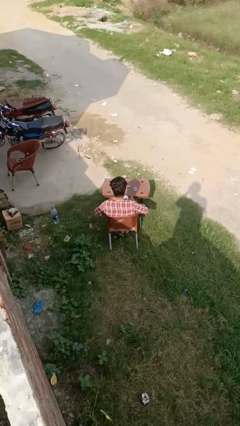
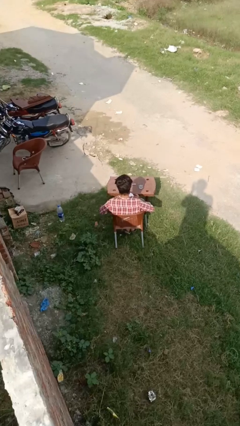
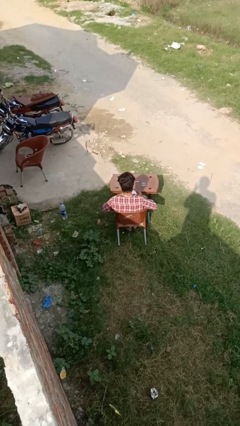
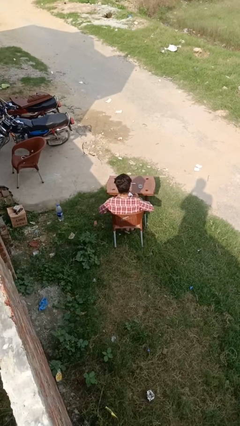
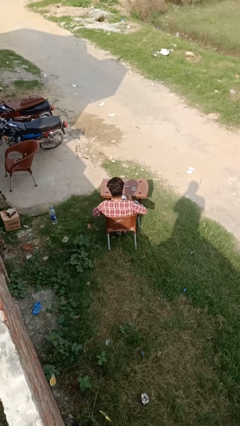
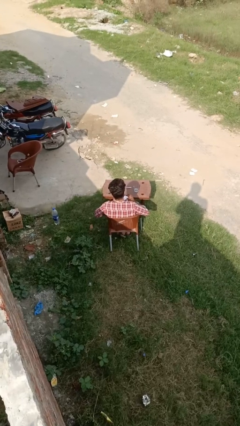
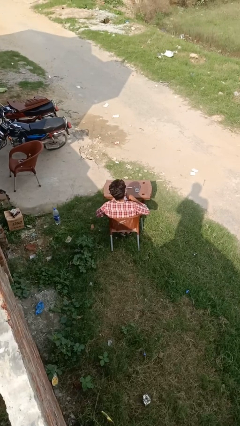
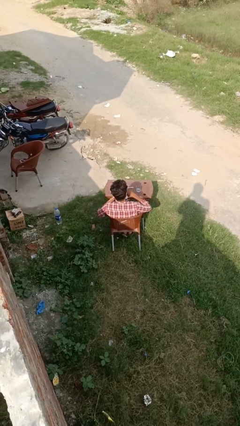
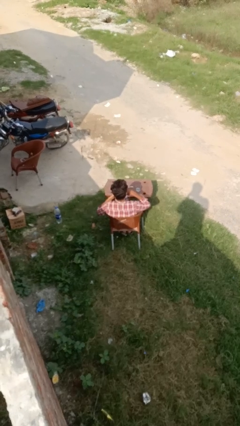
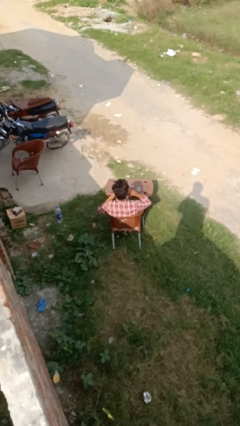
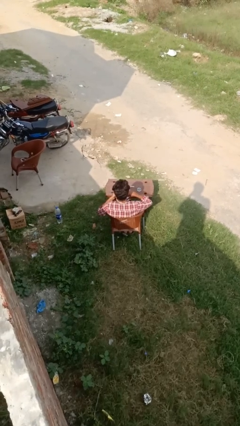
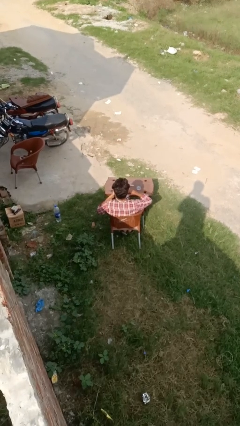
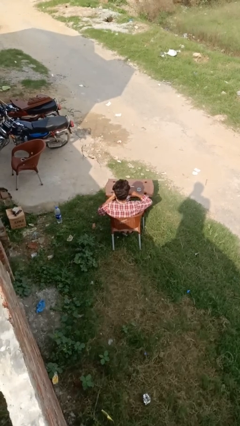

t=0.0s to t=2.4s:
person eats with hands

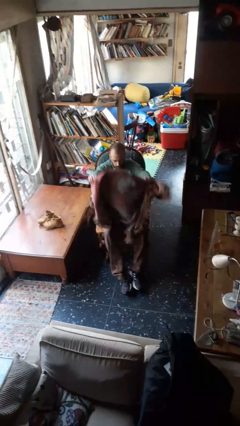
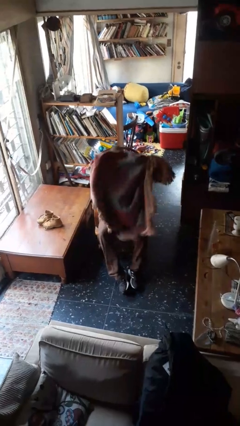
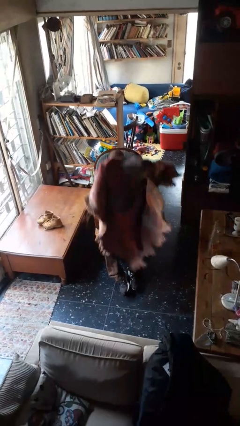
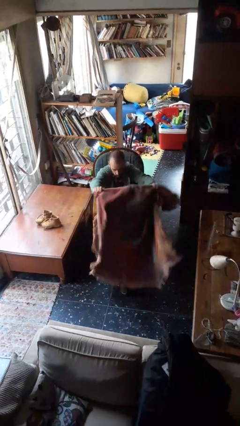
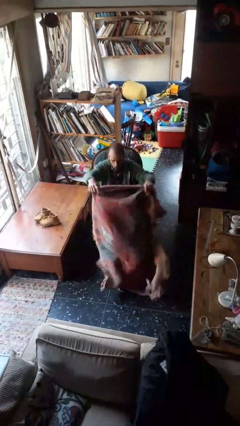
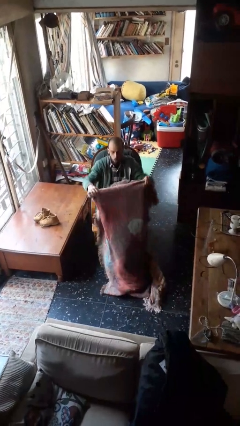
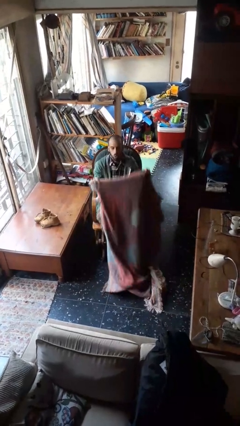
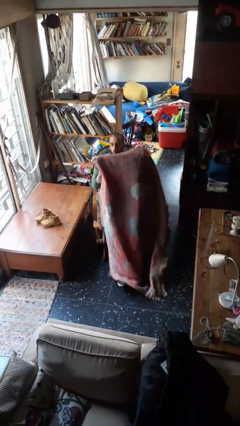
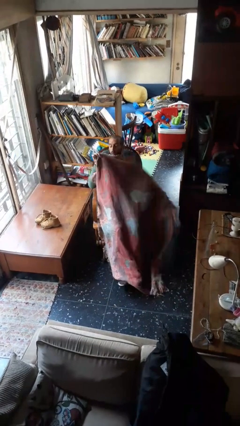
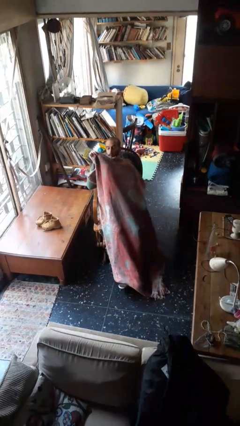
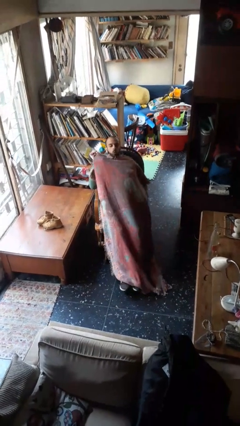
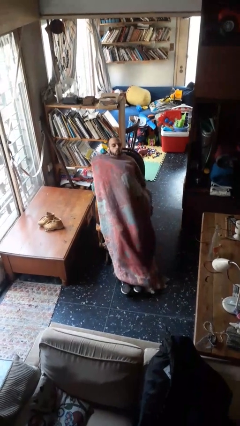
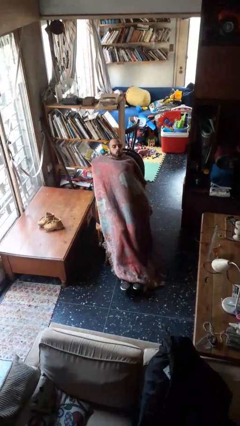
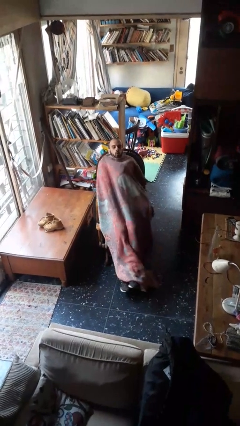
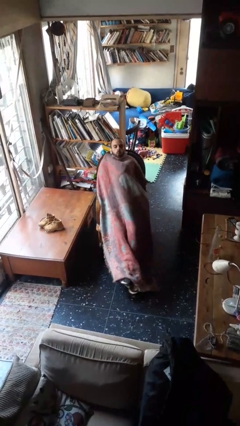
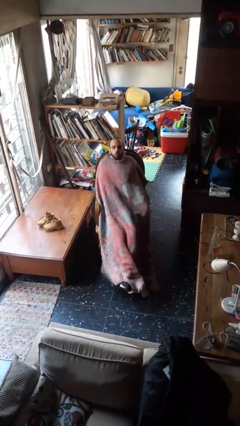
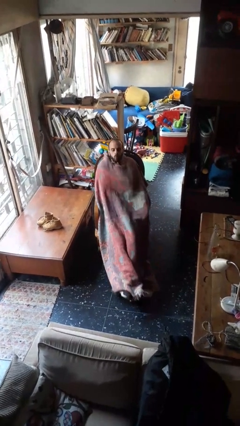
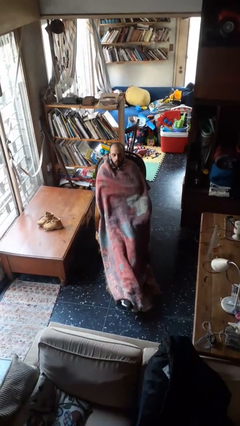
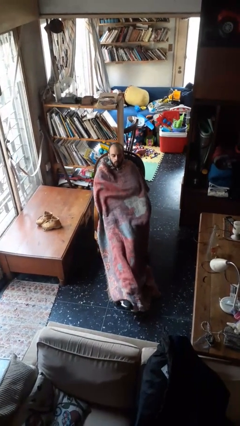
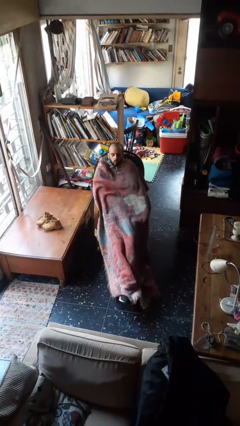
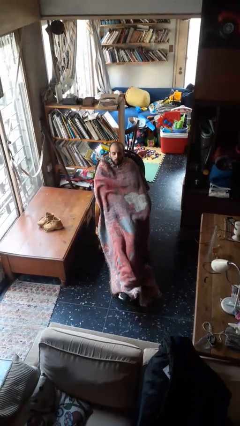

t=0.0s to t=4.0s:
person covers with blanket

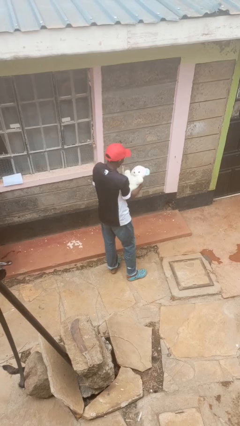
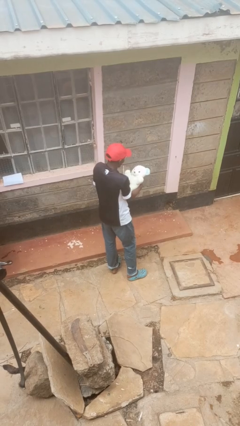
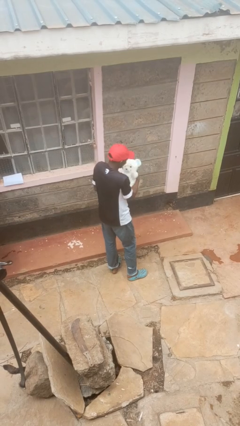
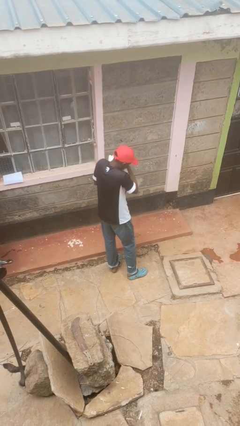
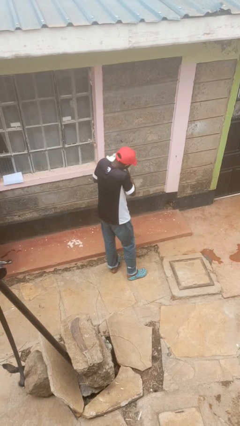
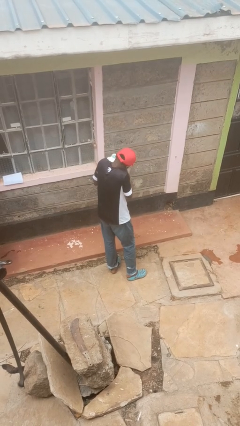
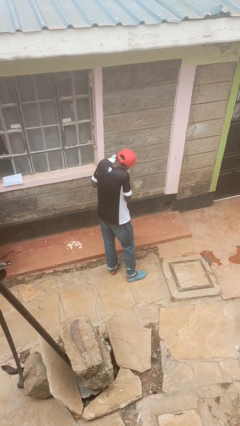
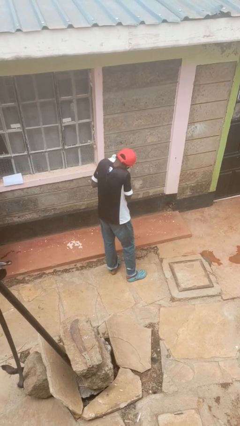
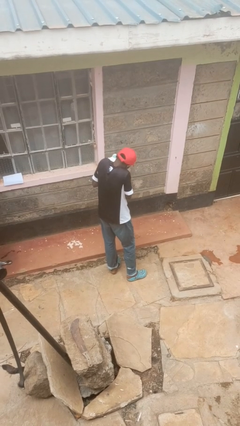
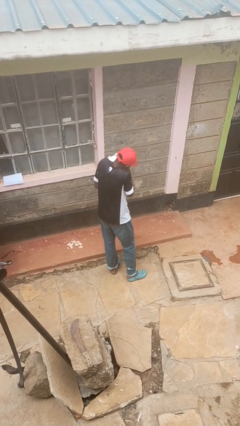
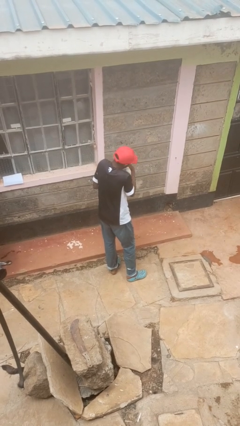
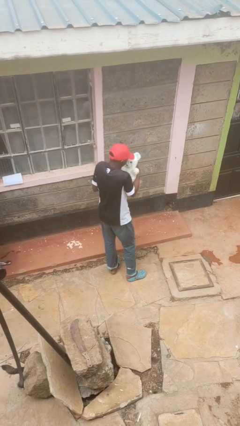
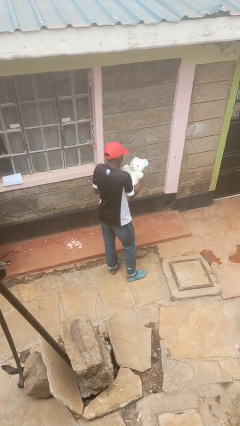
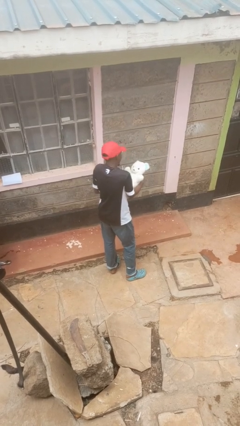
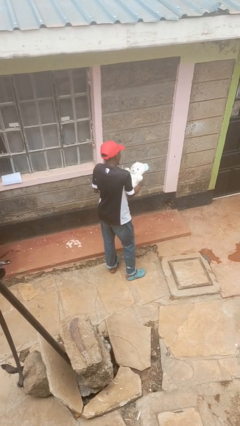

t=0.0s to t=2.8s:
person hugs stuffed animal

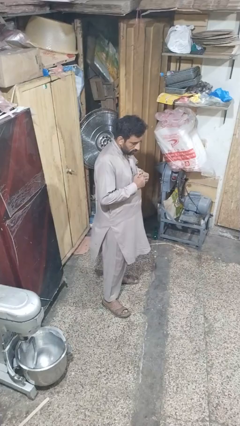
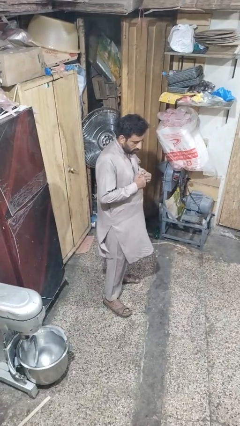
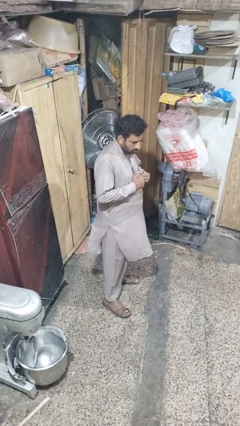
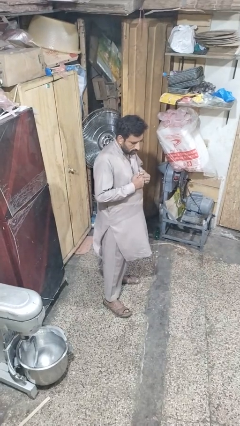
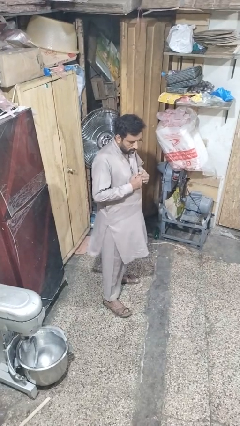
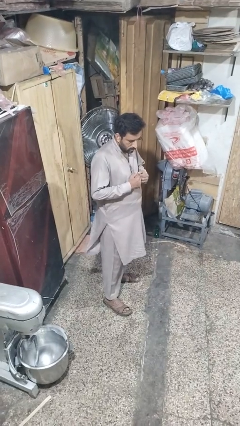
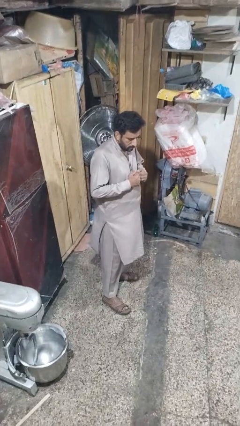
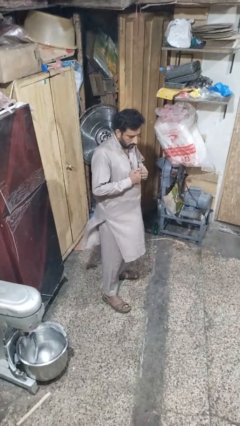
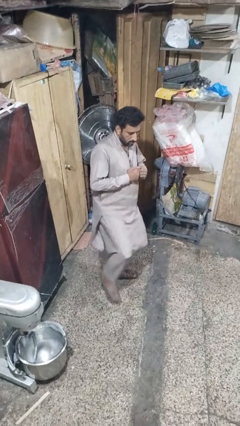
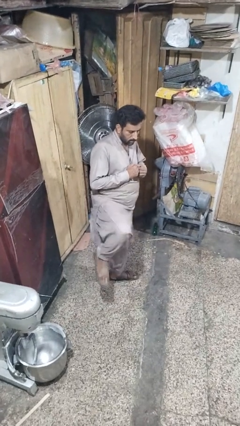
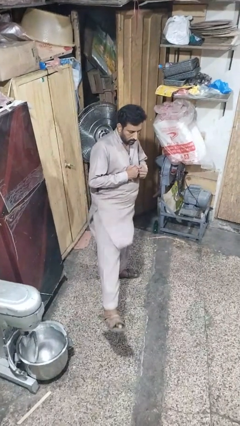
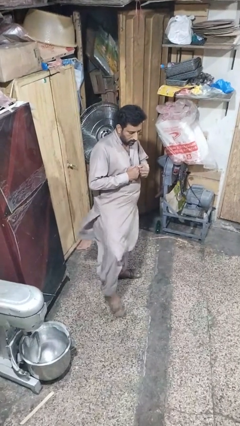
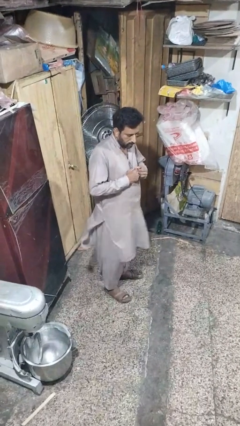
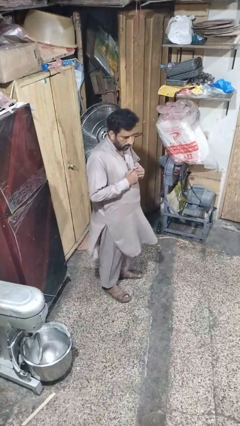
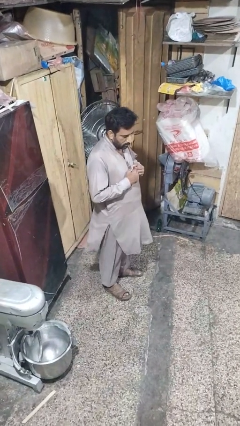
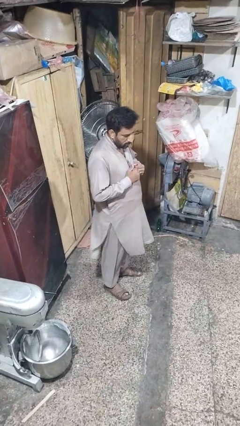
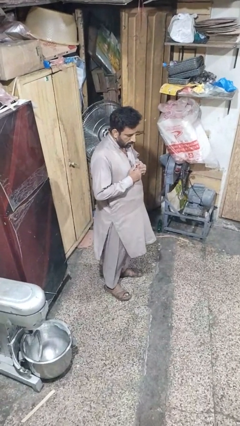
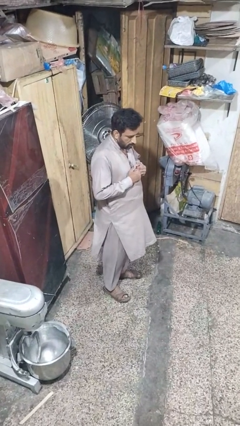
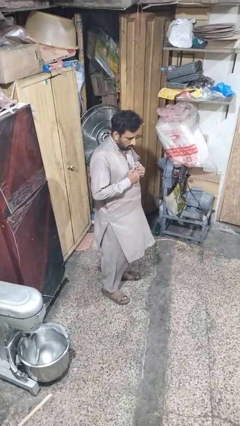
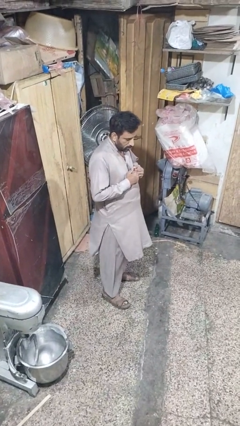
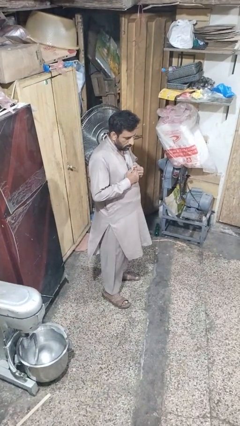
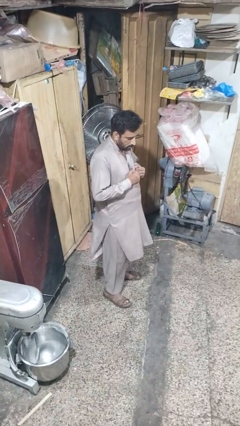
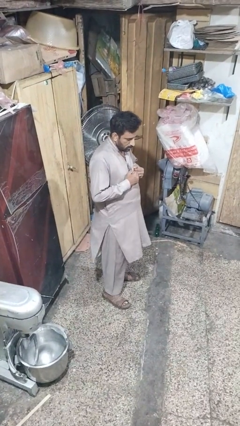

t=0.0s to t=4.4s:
person karate kicks

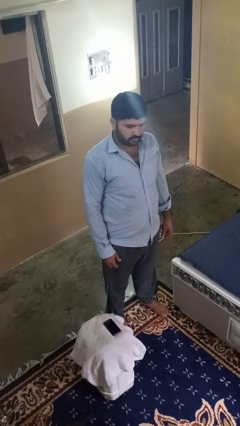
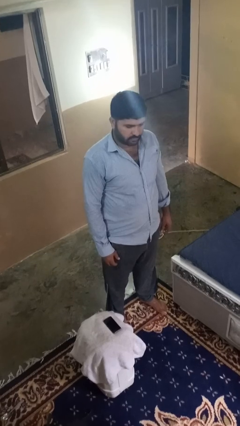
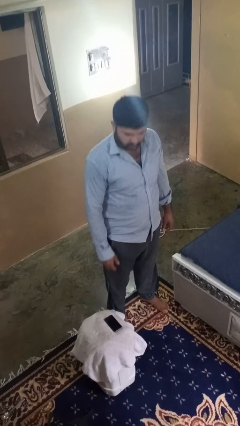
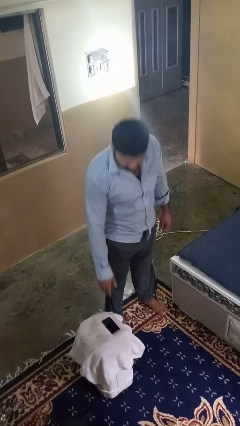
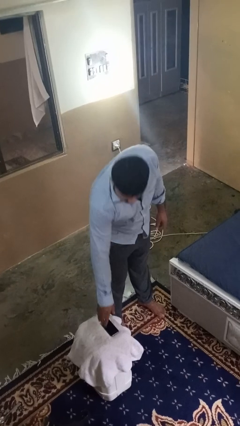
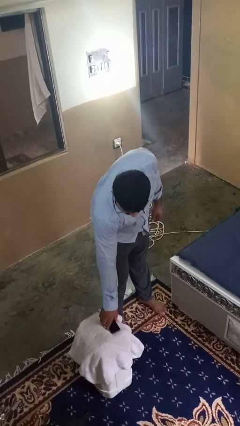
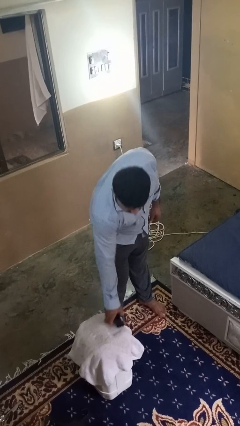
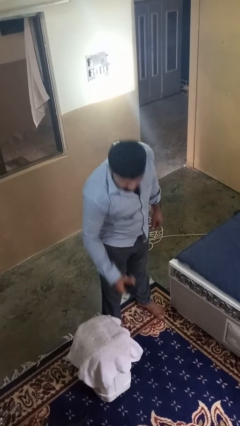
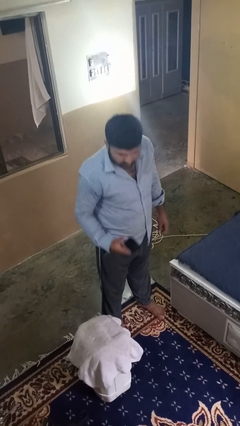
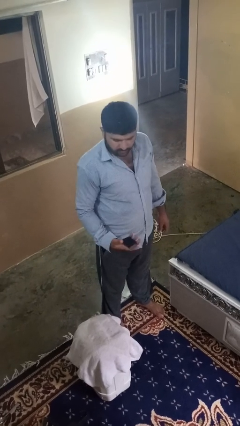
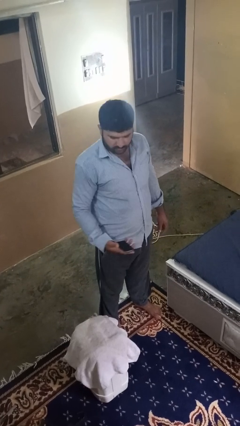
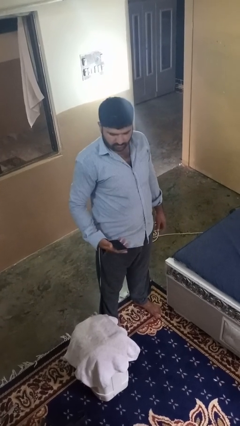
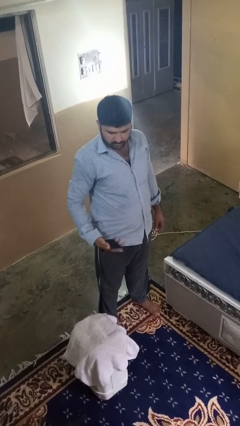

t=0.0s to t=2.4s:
person takes phone from pocket

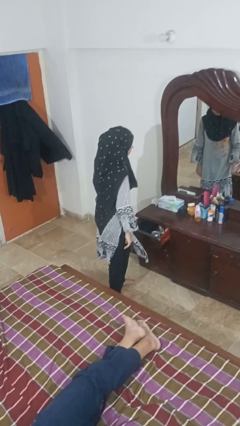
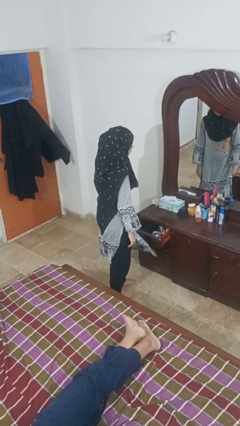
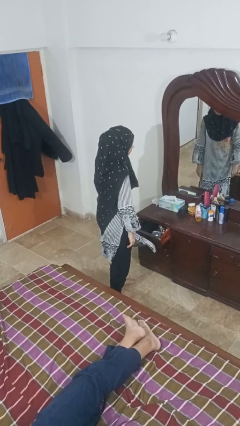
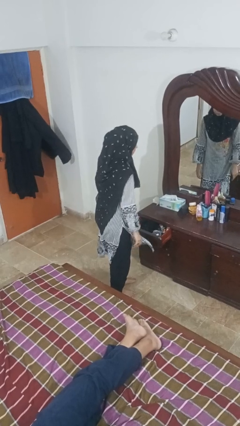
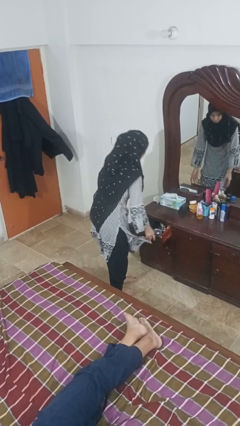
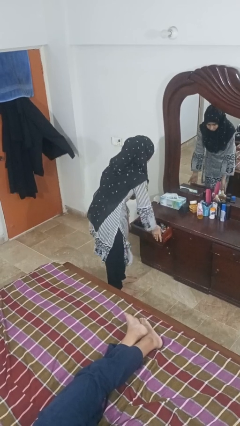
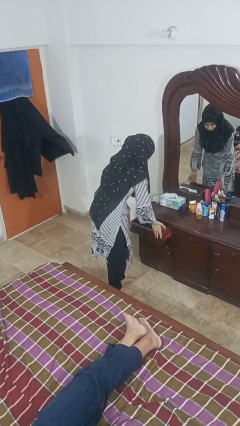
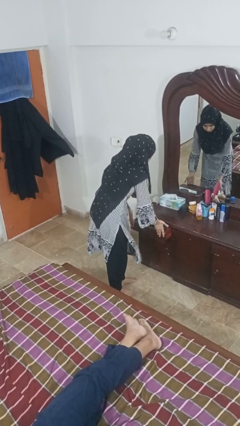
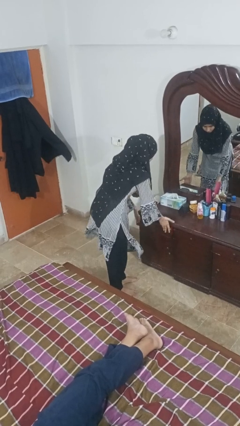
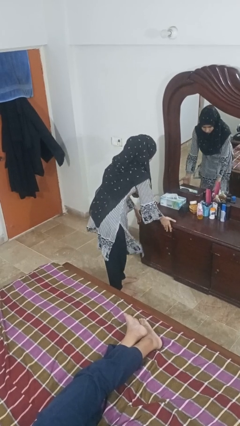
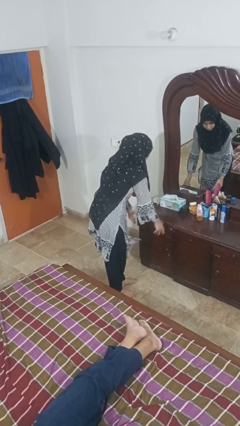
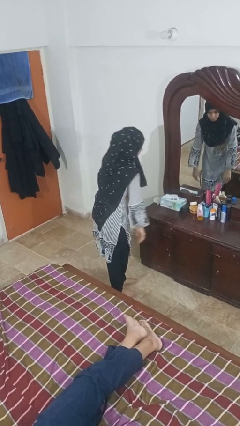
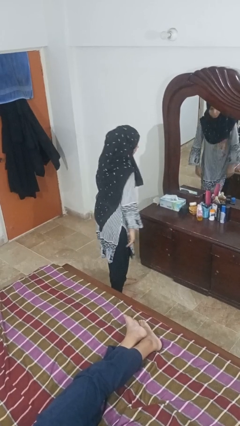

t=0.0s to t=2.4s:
person closes dresser drawer
